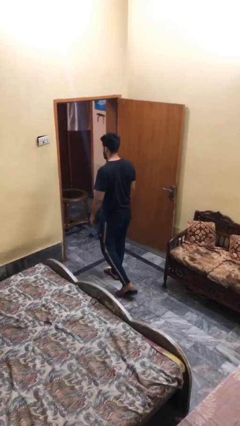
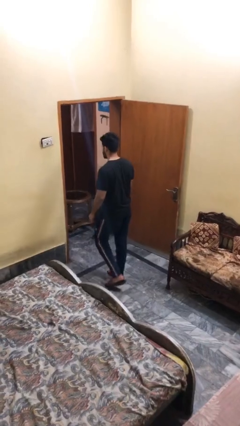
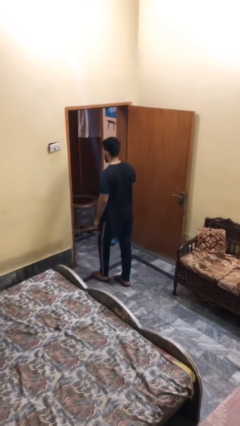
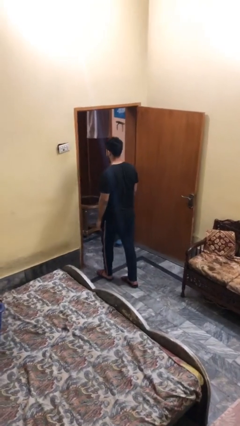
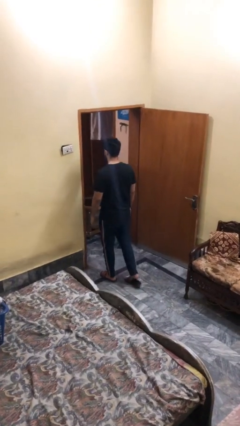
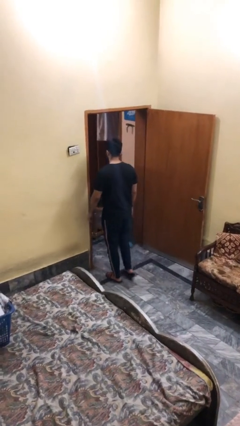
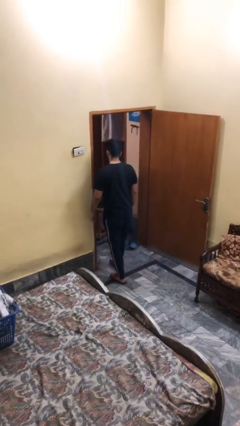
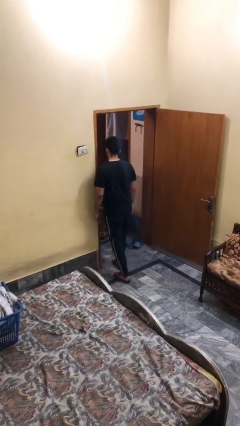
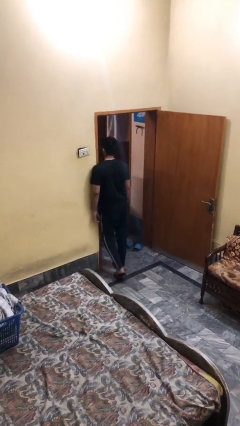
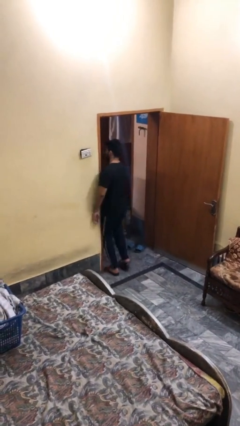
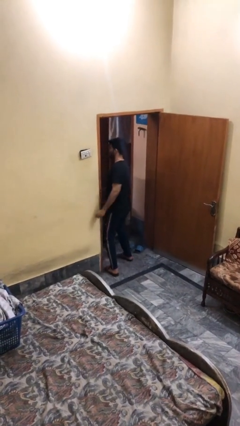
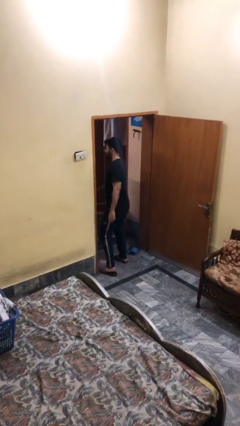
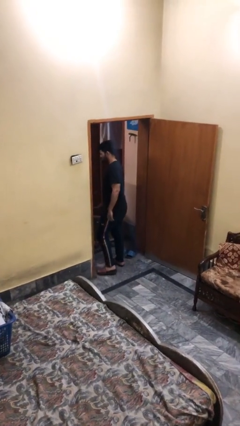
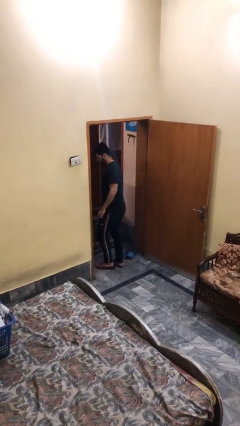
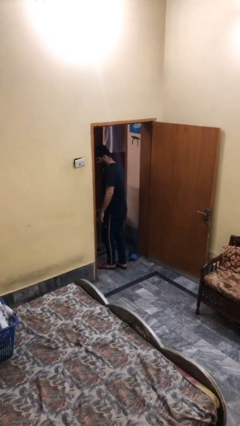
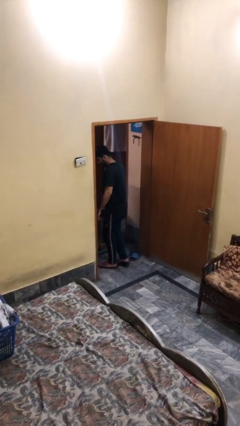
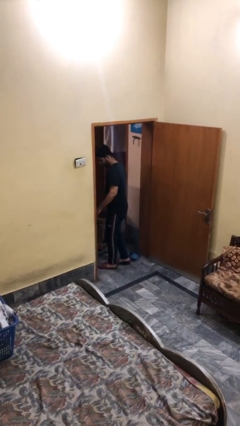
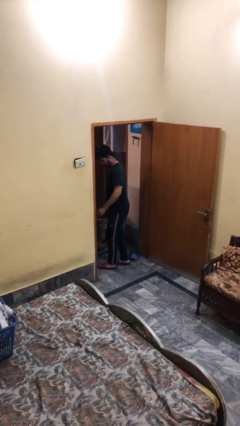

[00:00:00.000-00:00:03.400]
person bumps into wall

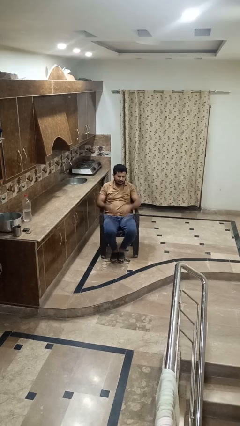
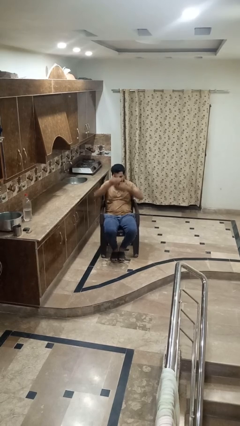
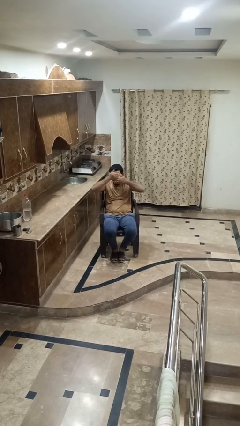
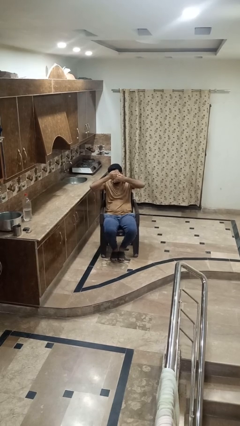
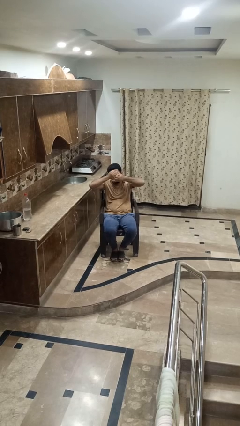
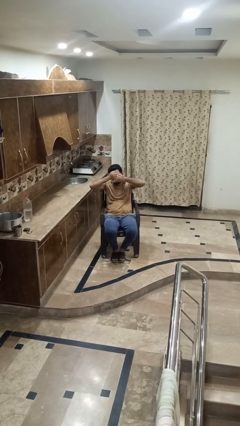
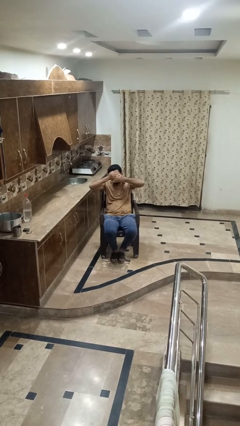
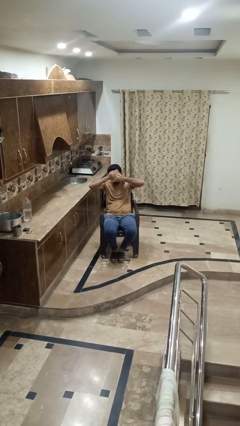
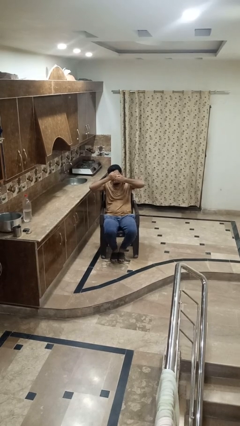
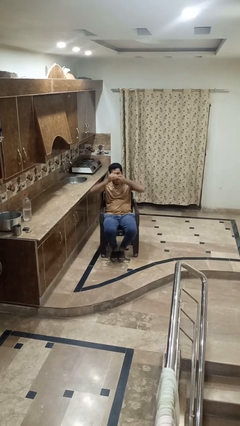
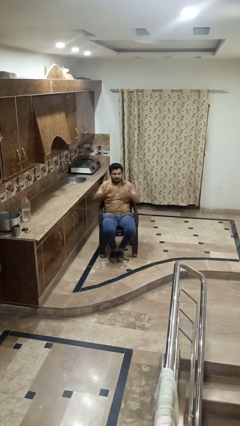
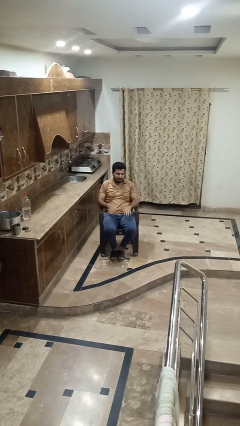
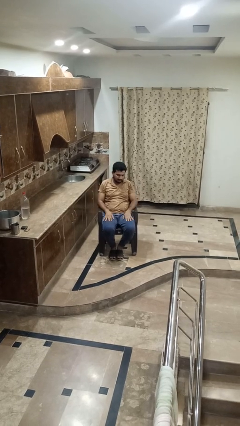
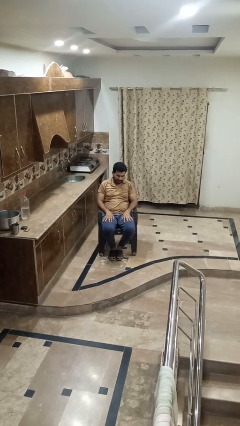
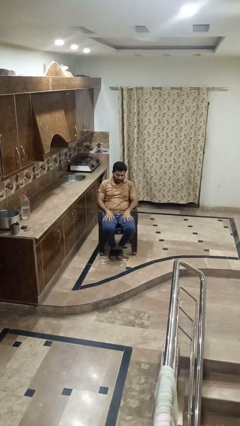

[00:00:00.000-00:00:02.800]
person covers face with hands

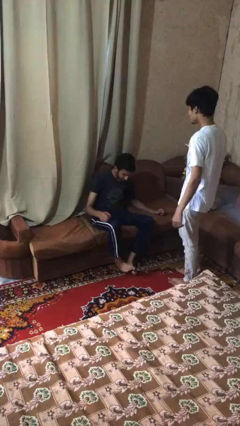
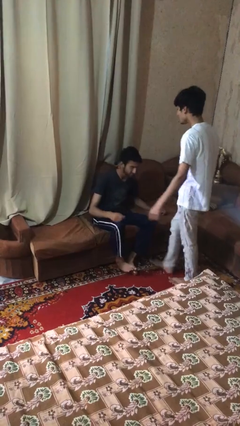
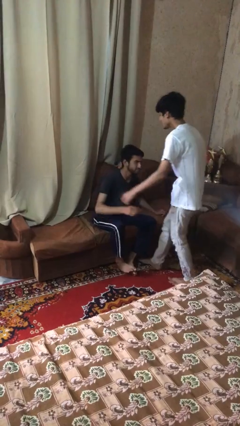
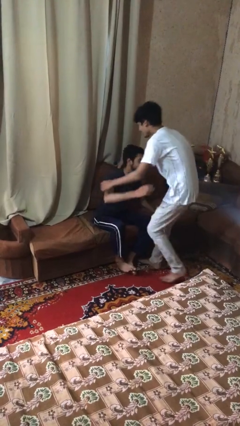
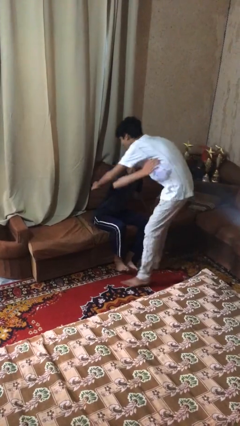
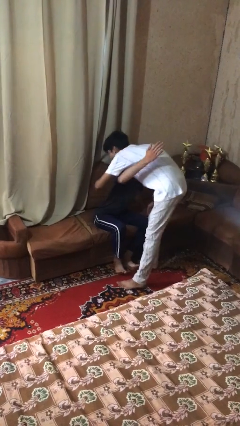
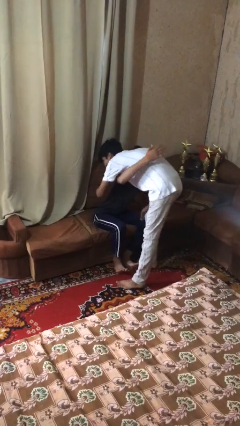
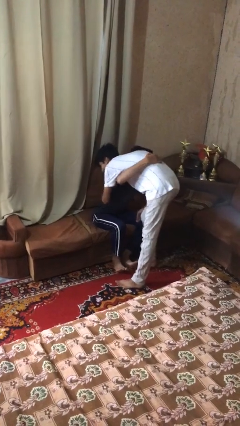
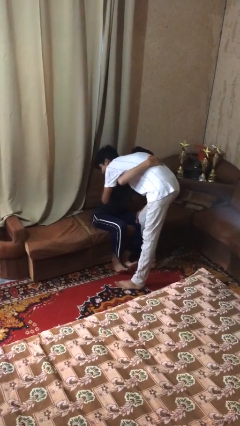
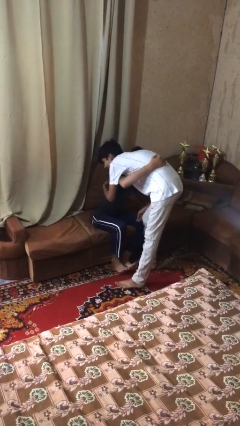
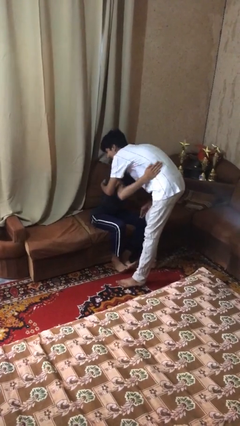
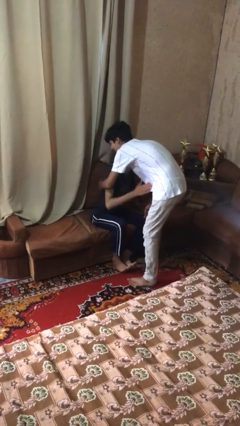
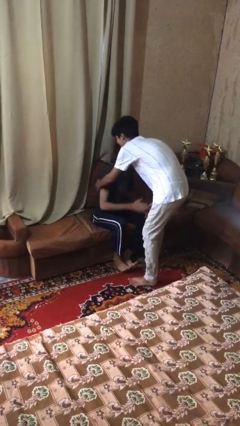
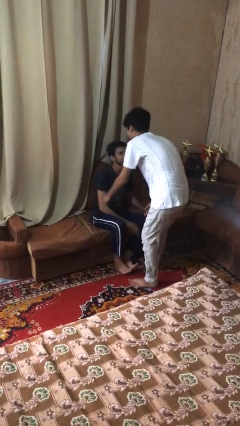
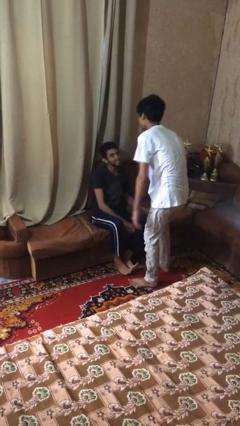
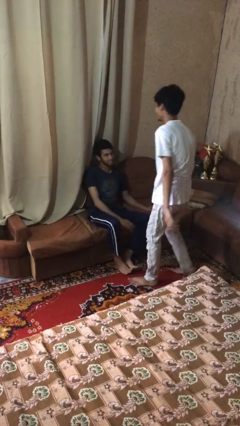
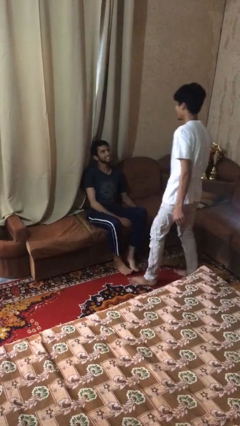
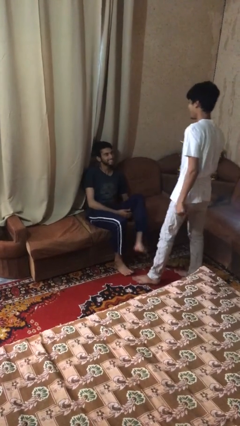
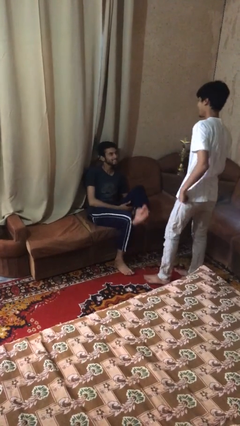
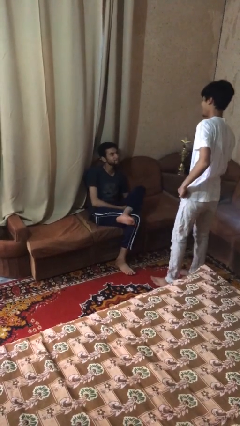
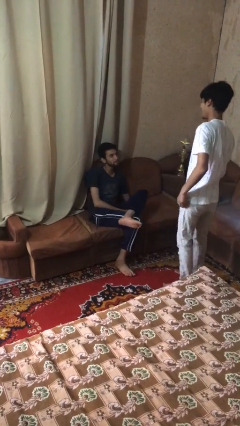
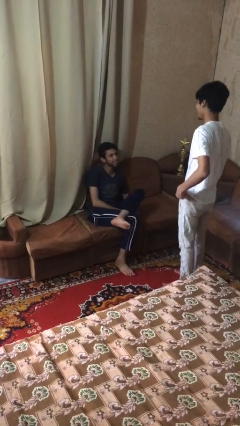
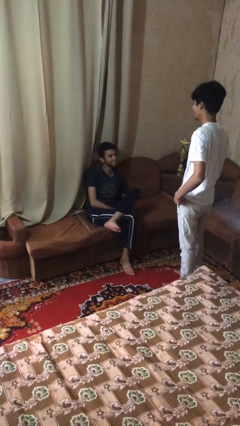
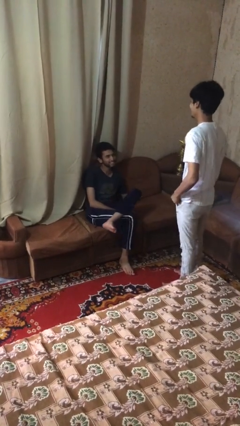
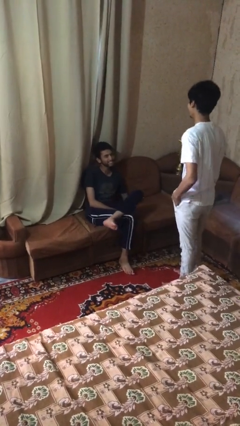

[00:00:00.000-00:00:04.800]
person embraces person

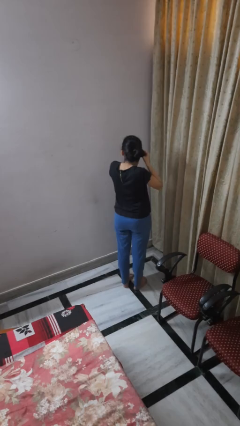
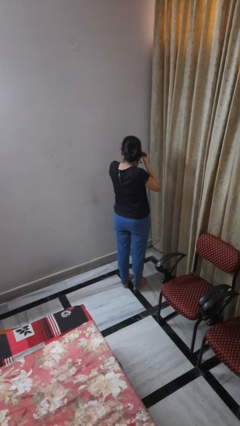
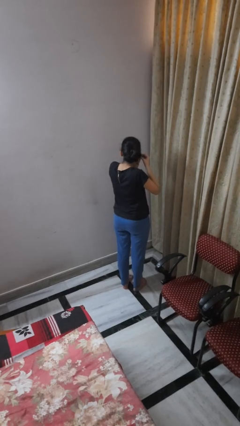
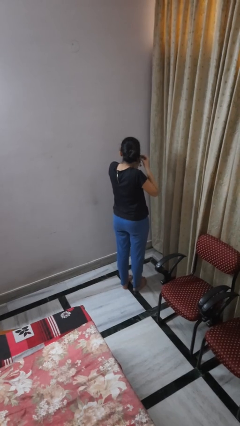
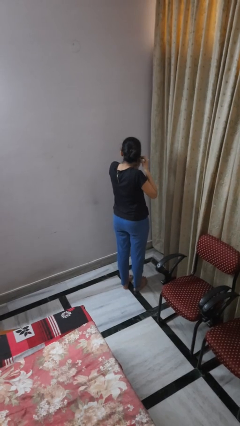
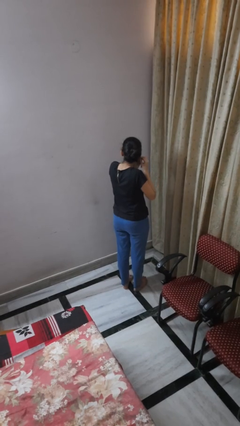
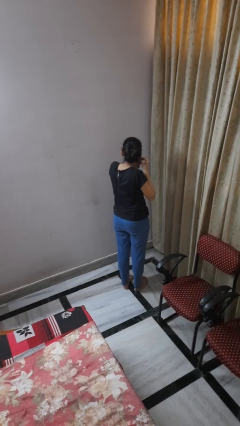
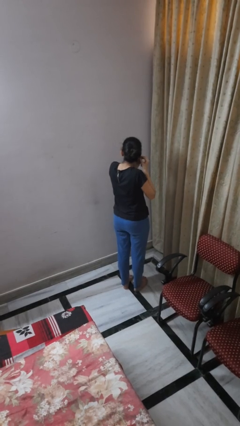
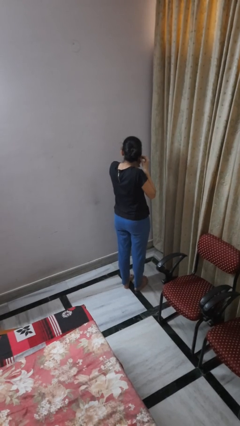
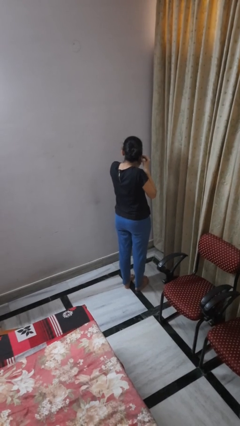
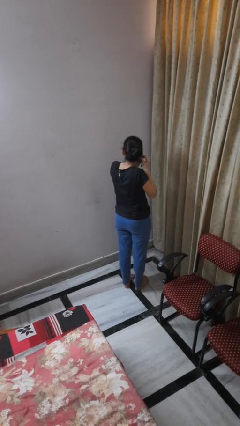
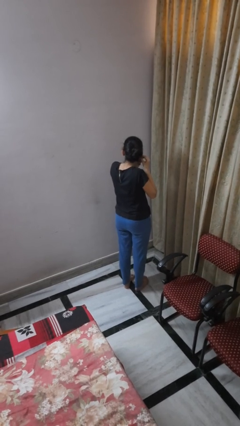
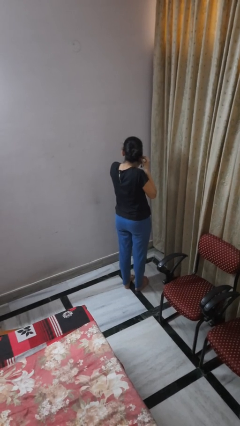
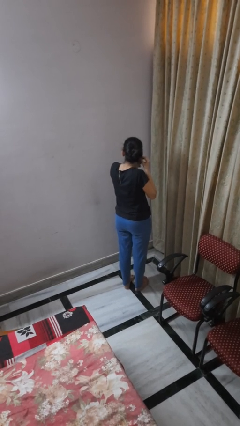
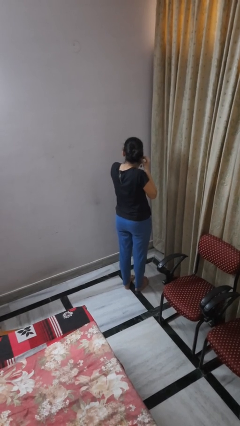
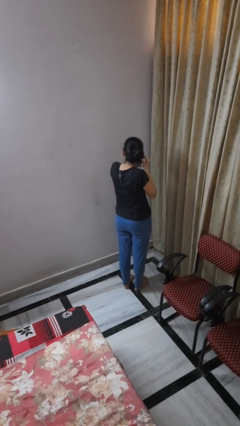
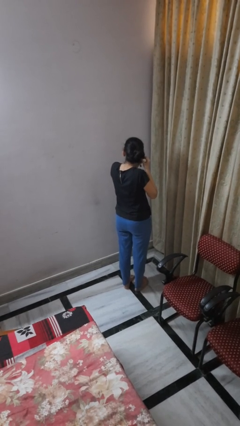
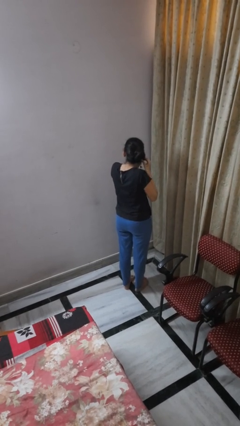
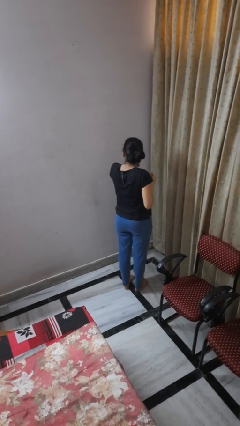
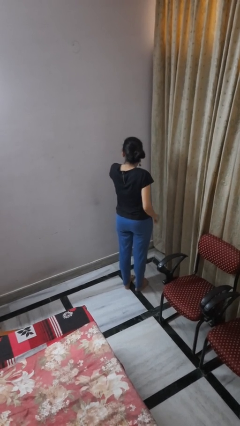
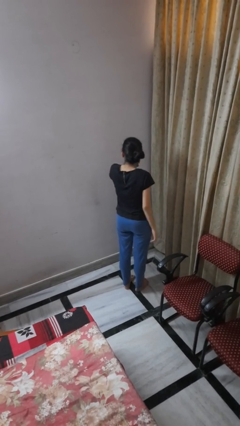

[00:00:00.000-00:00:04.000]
person puts on earrings

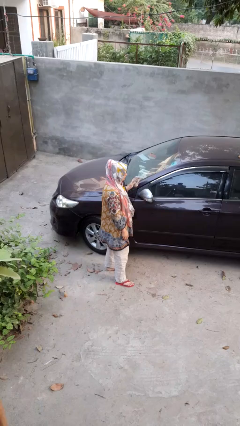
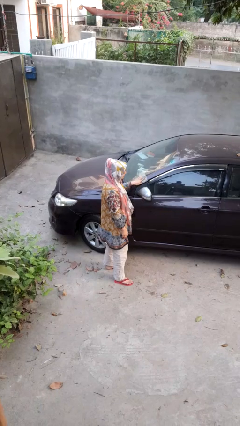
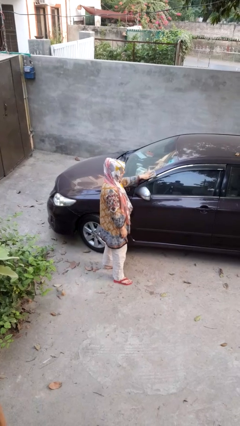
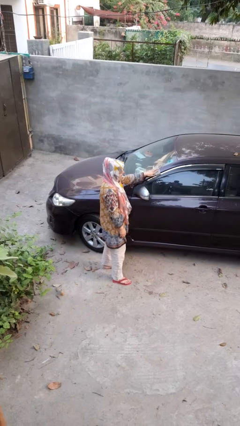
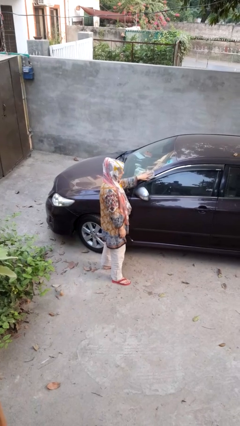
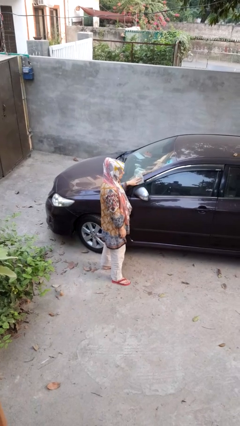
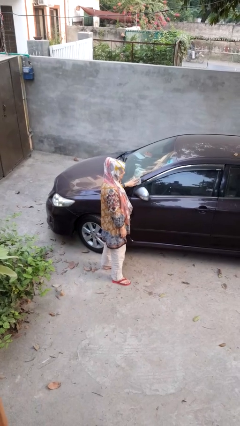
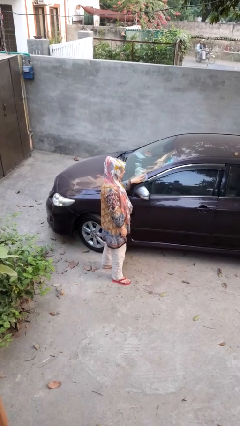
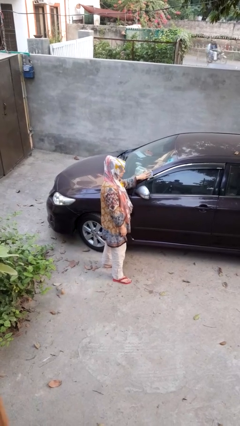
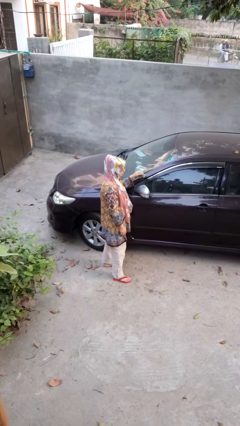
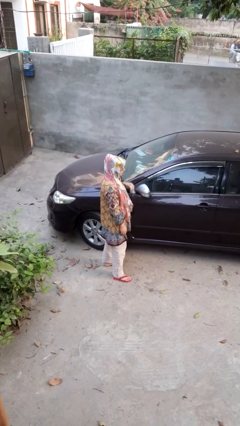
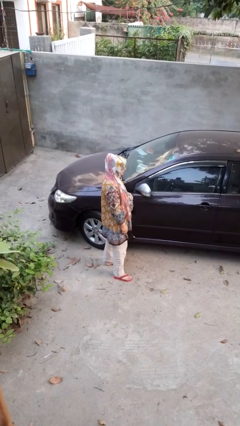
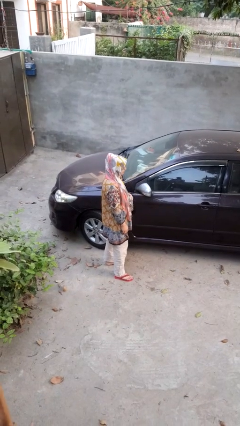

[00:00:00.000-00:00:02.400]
person polishes car with rag

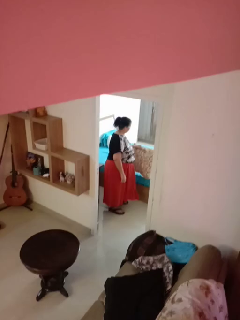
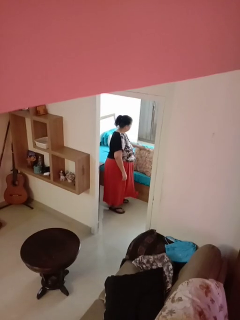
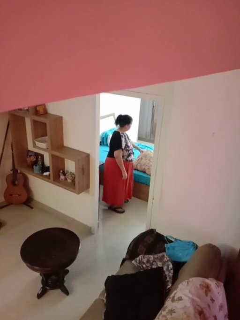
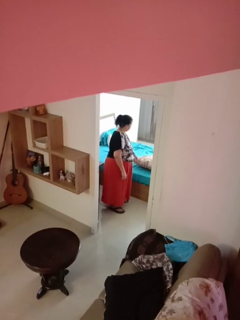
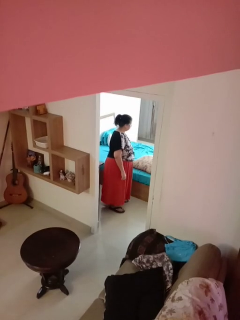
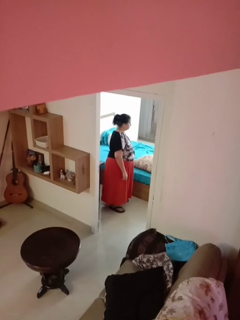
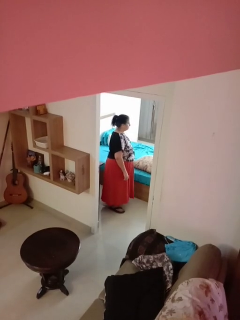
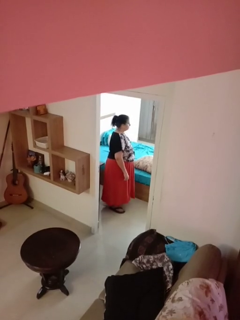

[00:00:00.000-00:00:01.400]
person puts down object on bed
